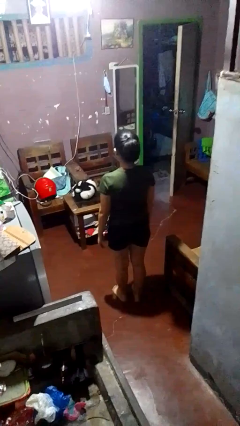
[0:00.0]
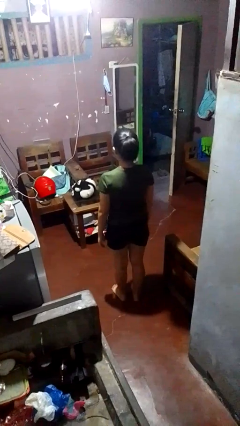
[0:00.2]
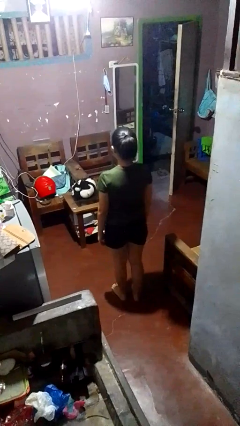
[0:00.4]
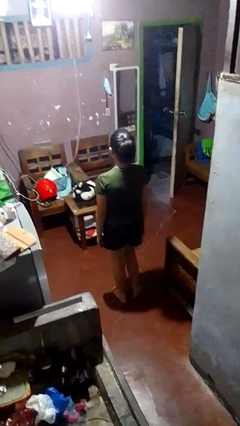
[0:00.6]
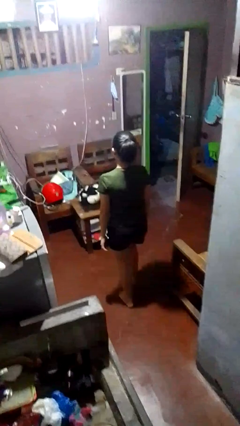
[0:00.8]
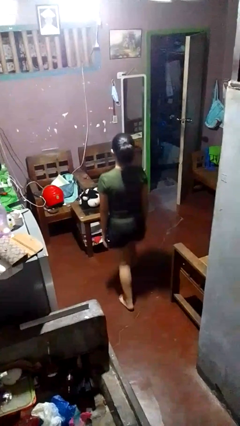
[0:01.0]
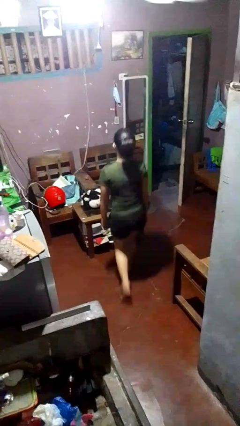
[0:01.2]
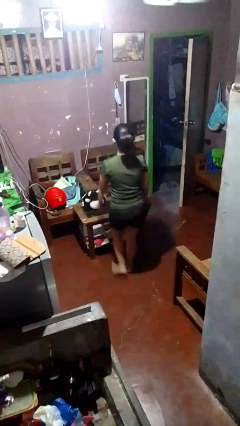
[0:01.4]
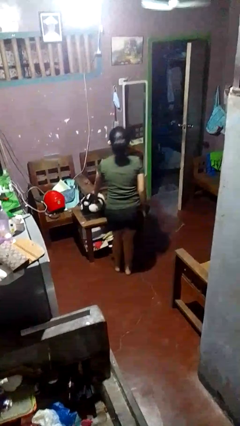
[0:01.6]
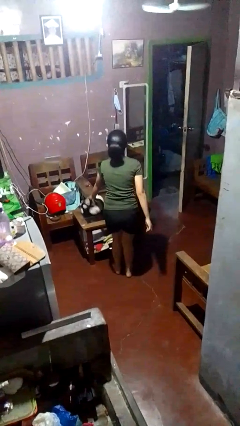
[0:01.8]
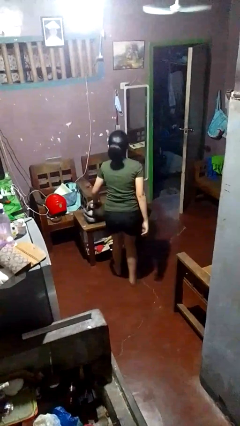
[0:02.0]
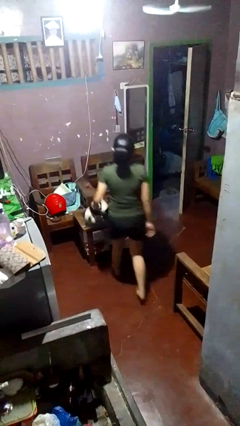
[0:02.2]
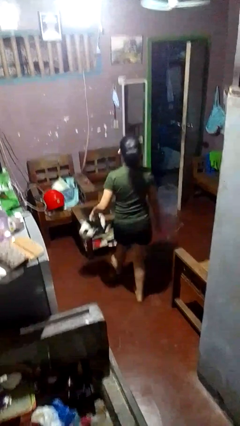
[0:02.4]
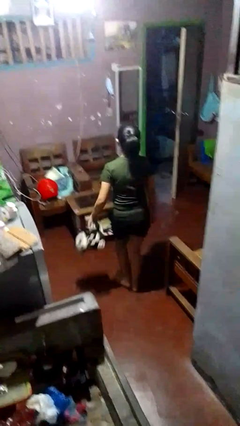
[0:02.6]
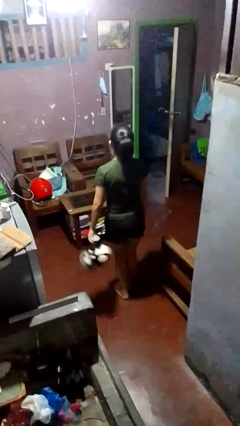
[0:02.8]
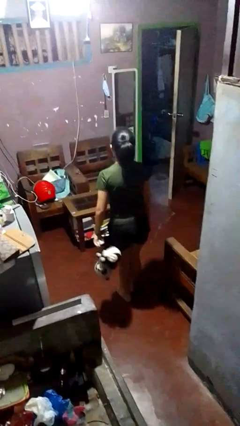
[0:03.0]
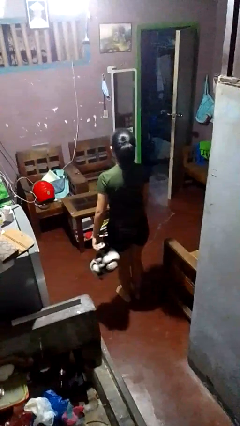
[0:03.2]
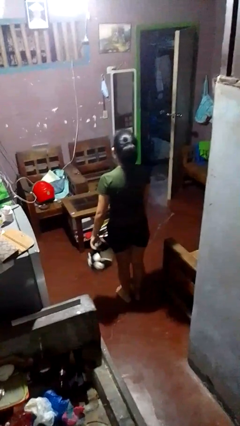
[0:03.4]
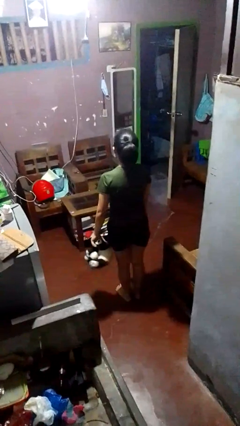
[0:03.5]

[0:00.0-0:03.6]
person picks up object from table

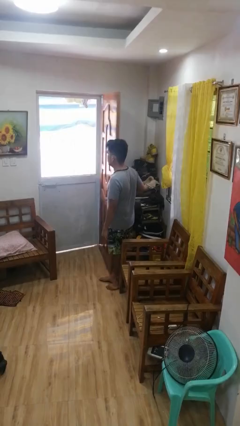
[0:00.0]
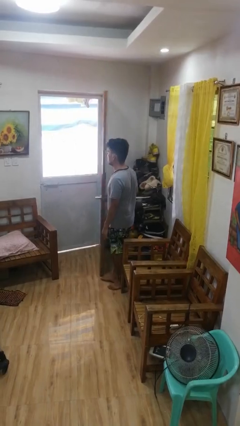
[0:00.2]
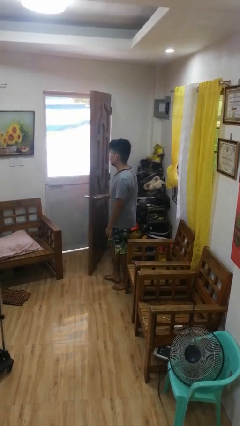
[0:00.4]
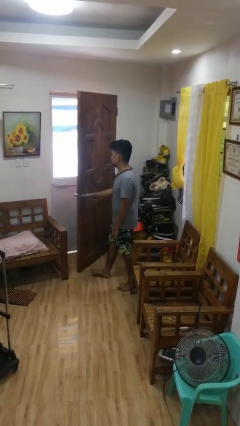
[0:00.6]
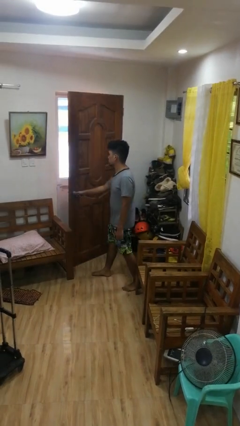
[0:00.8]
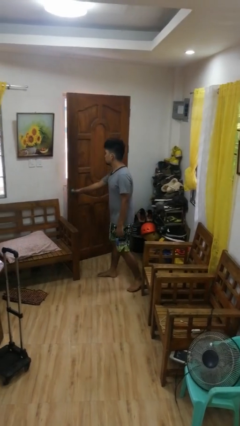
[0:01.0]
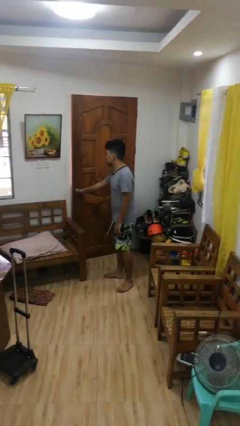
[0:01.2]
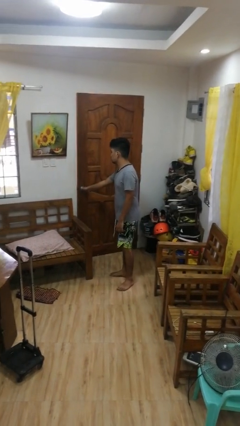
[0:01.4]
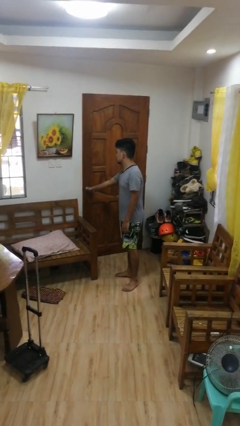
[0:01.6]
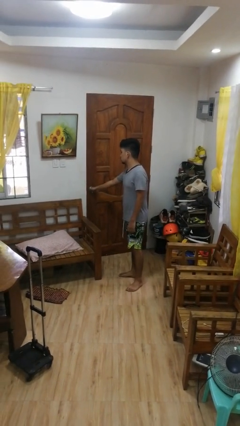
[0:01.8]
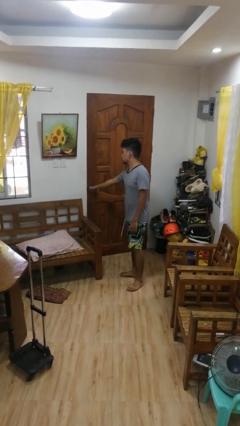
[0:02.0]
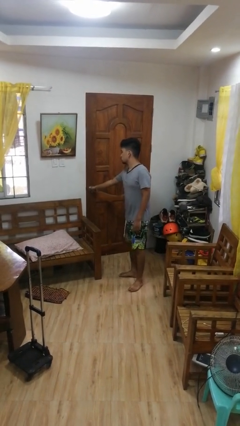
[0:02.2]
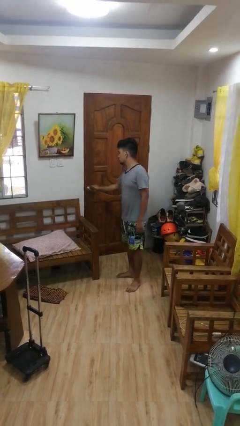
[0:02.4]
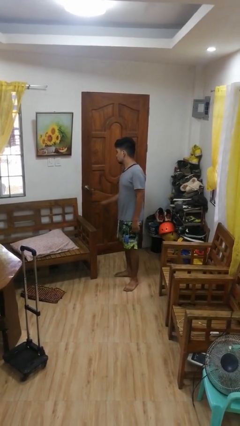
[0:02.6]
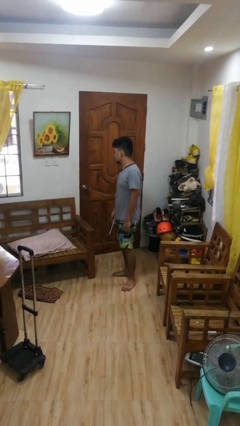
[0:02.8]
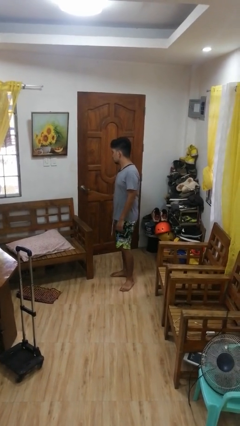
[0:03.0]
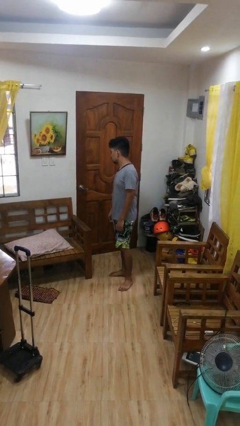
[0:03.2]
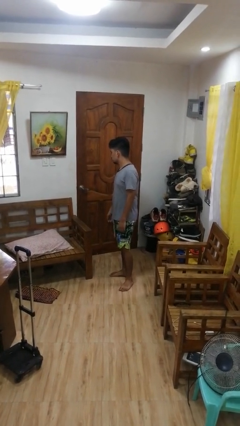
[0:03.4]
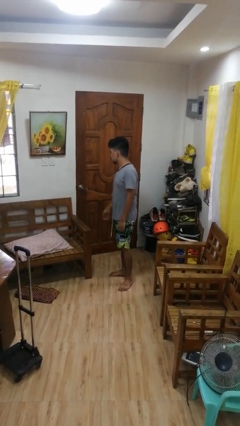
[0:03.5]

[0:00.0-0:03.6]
person closes facility door

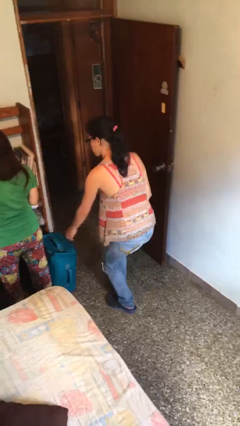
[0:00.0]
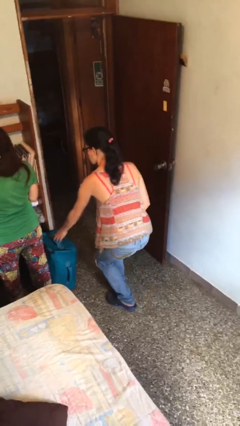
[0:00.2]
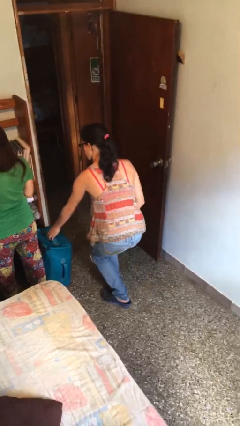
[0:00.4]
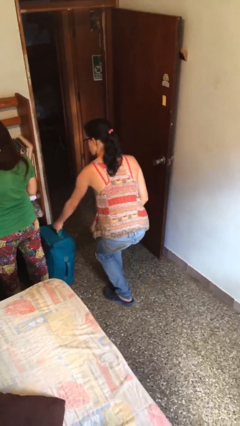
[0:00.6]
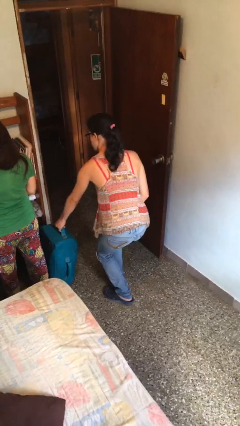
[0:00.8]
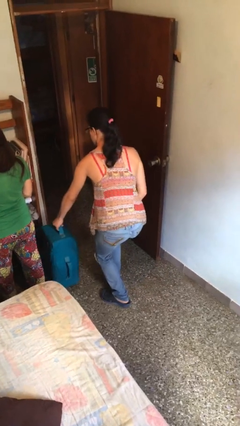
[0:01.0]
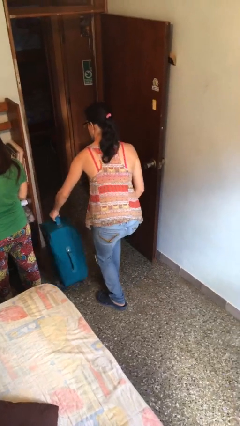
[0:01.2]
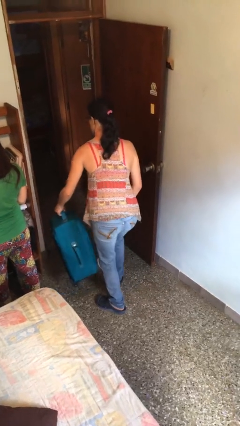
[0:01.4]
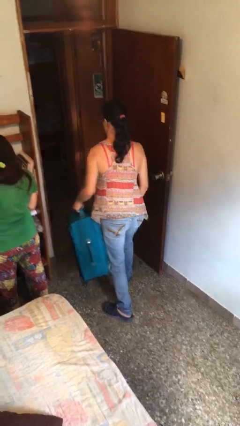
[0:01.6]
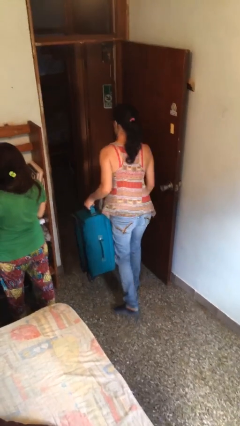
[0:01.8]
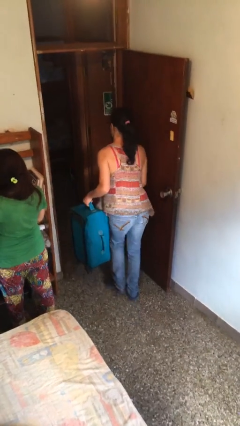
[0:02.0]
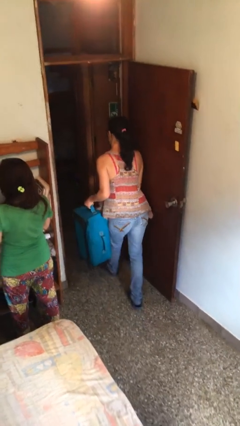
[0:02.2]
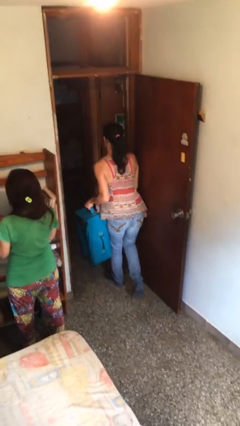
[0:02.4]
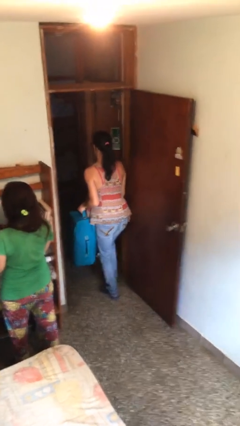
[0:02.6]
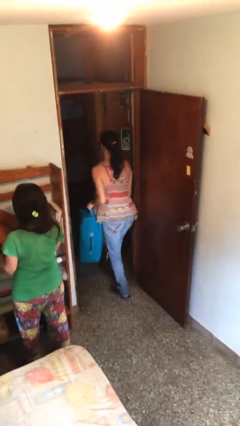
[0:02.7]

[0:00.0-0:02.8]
person steals object from person

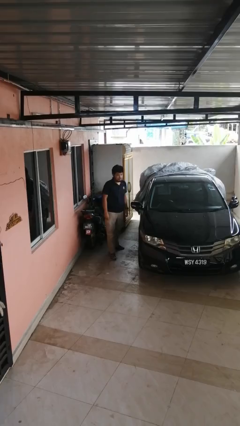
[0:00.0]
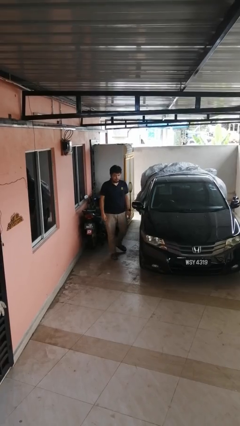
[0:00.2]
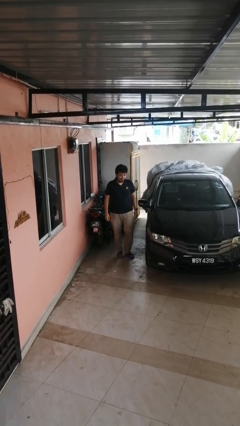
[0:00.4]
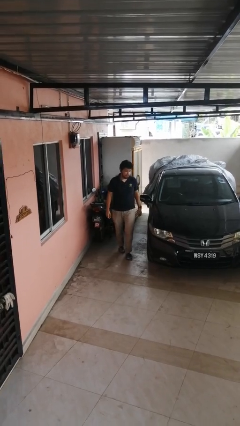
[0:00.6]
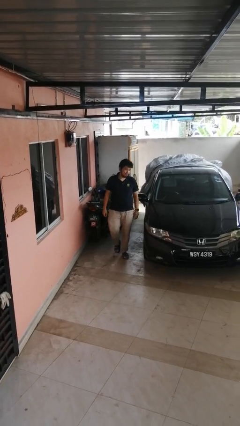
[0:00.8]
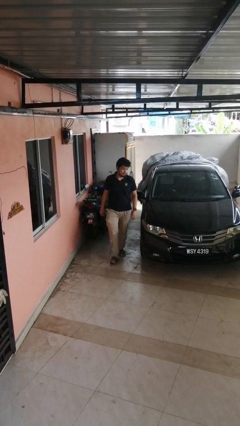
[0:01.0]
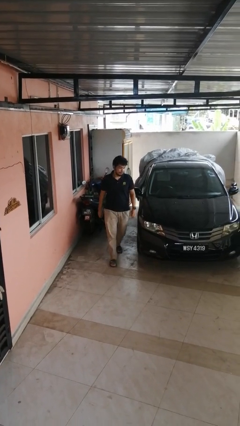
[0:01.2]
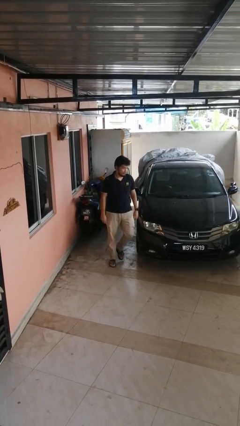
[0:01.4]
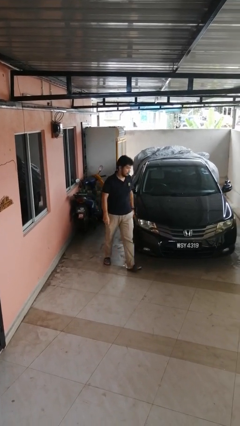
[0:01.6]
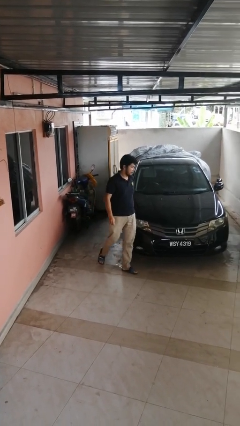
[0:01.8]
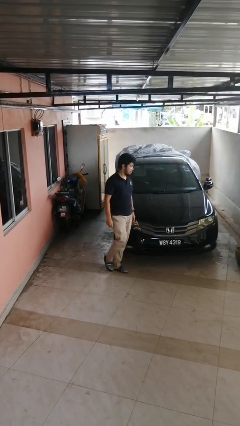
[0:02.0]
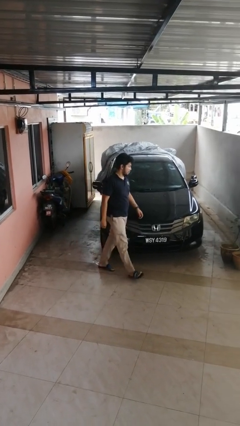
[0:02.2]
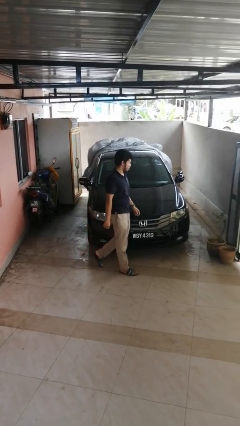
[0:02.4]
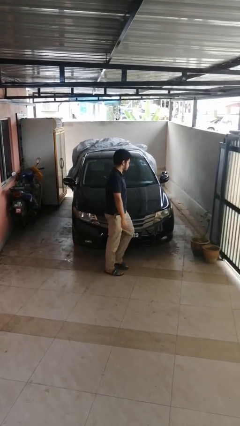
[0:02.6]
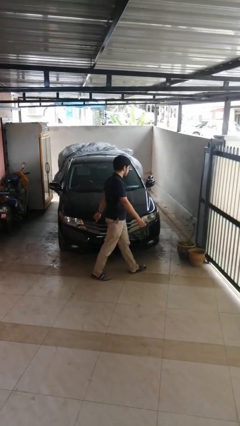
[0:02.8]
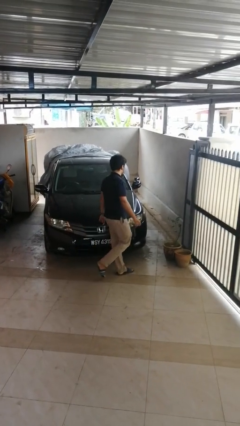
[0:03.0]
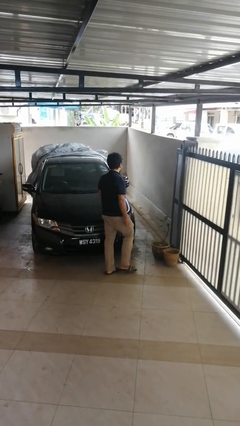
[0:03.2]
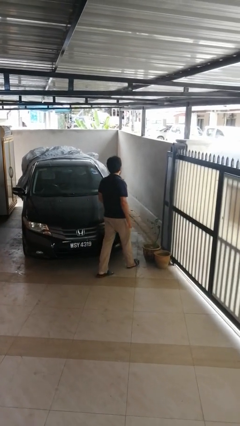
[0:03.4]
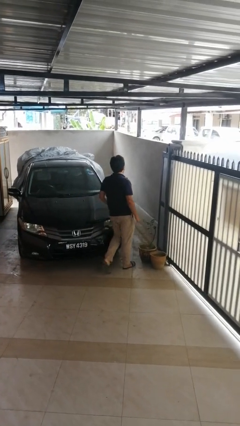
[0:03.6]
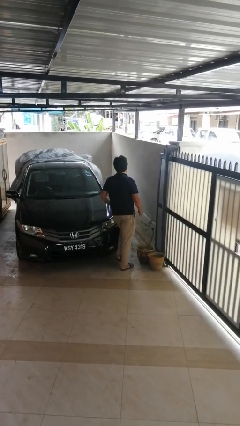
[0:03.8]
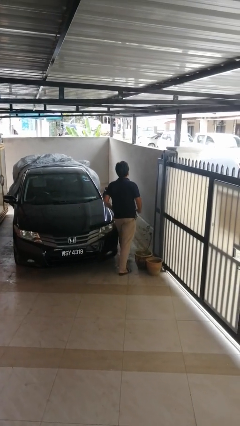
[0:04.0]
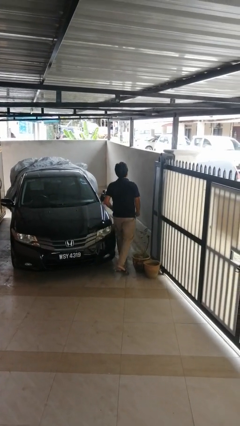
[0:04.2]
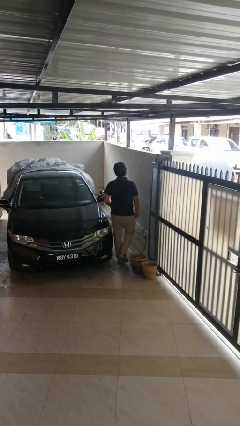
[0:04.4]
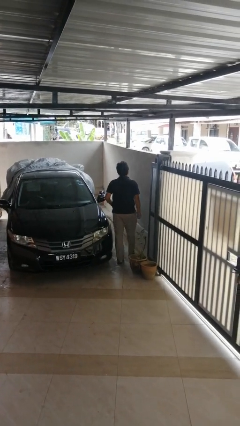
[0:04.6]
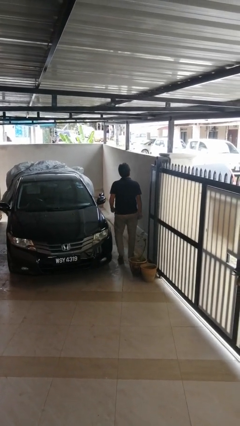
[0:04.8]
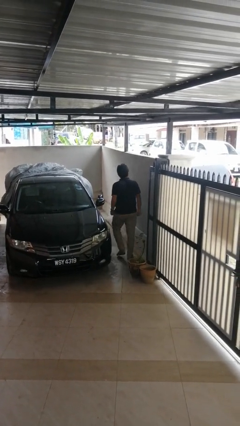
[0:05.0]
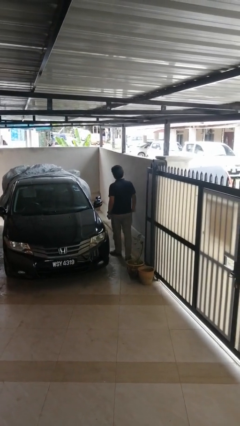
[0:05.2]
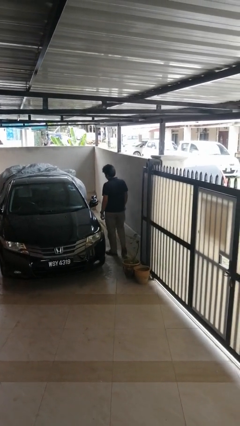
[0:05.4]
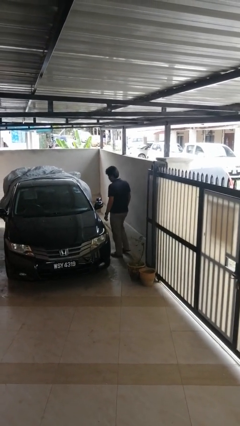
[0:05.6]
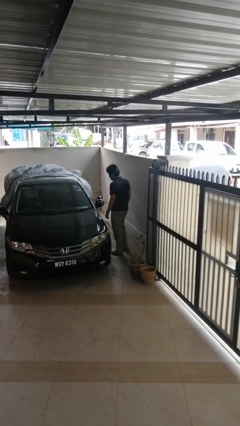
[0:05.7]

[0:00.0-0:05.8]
person walks around car

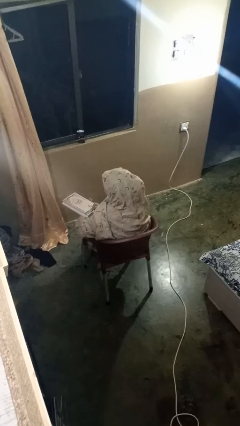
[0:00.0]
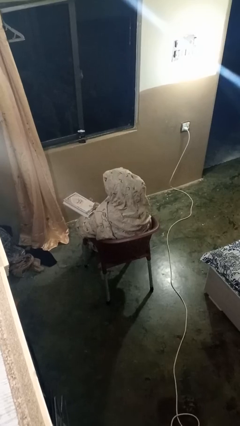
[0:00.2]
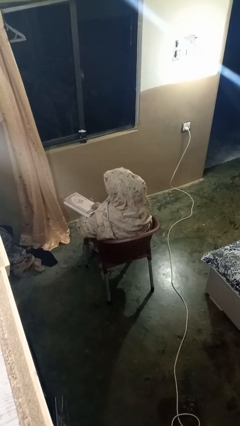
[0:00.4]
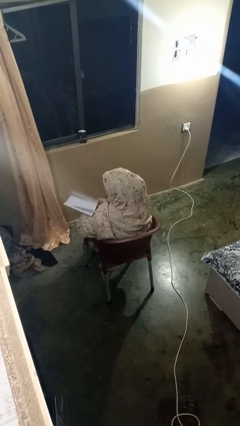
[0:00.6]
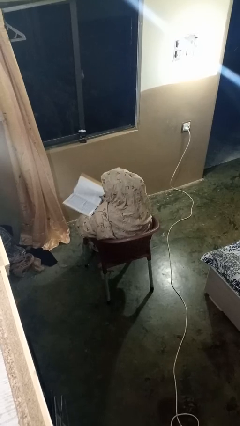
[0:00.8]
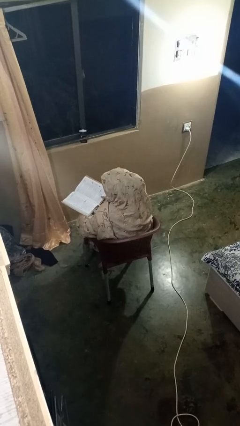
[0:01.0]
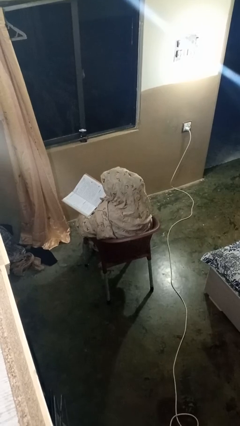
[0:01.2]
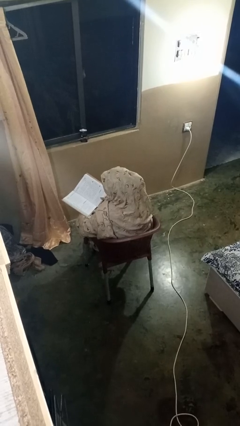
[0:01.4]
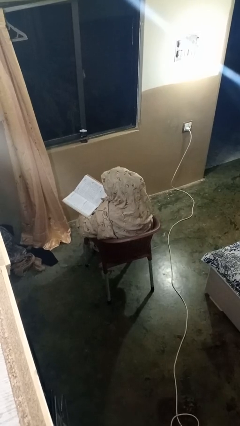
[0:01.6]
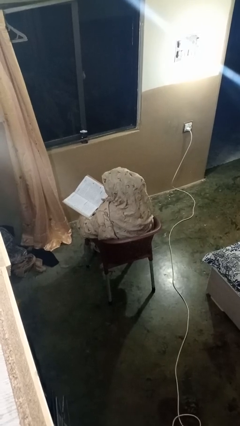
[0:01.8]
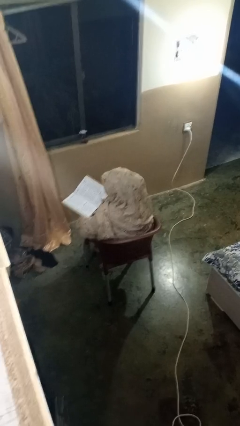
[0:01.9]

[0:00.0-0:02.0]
person reads book

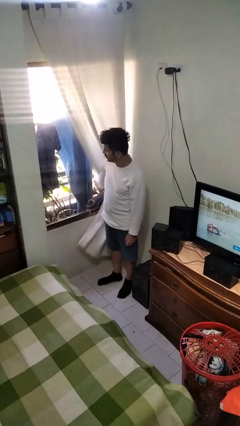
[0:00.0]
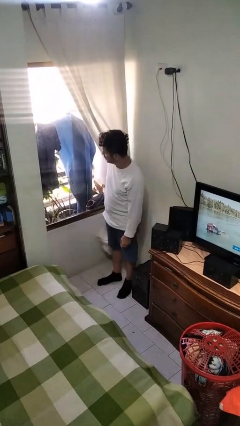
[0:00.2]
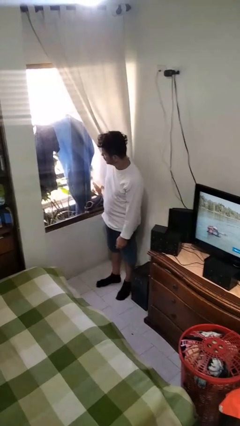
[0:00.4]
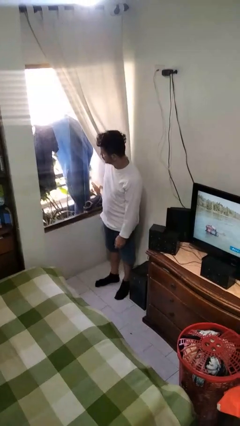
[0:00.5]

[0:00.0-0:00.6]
person opens curtains
